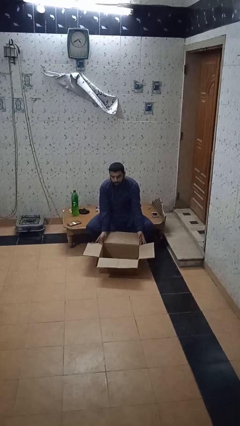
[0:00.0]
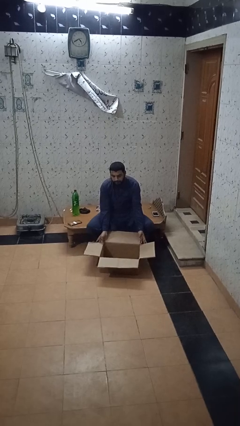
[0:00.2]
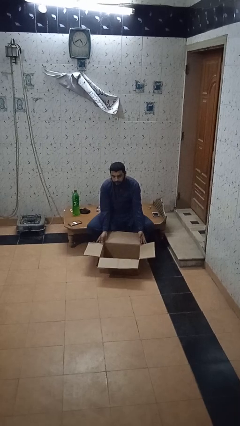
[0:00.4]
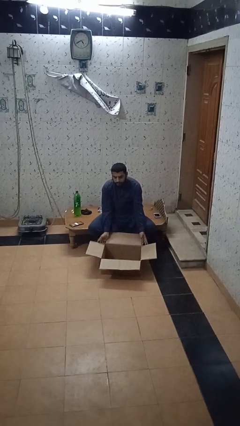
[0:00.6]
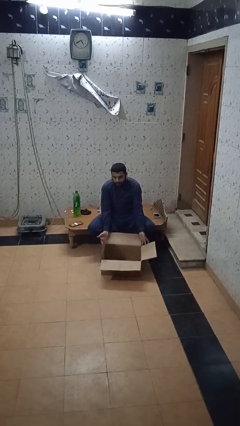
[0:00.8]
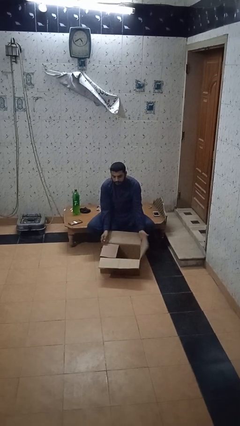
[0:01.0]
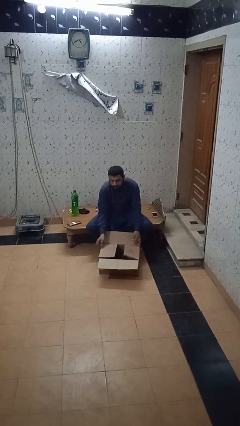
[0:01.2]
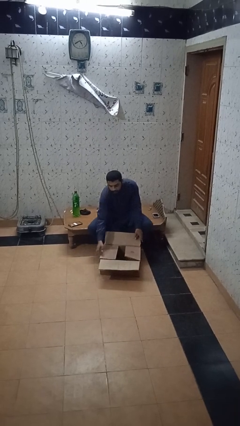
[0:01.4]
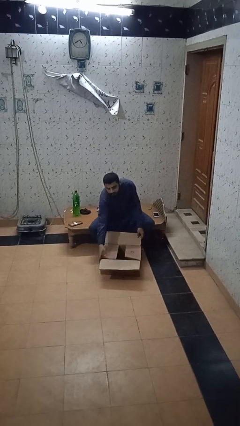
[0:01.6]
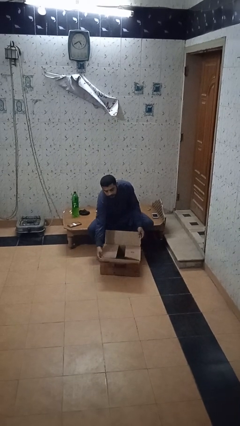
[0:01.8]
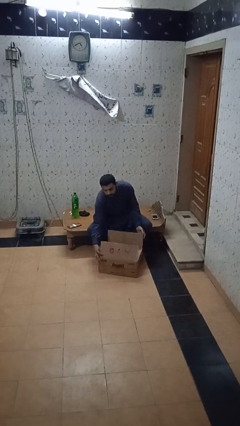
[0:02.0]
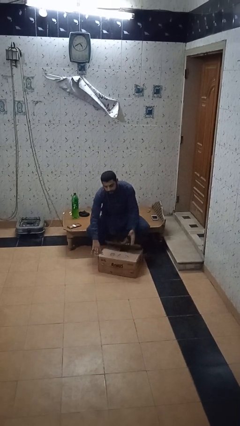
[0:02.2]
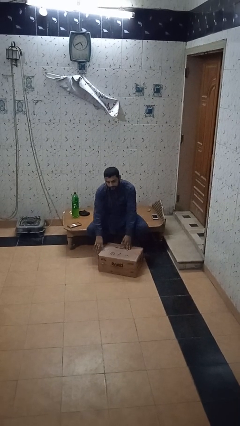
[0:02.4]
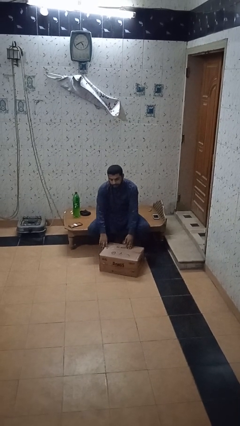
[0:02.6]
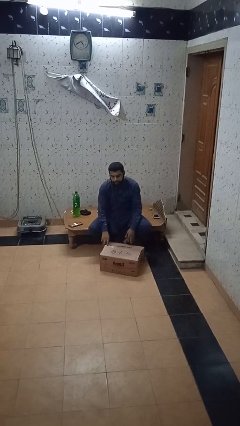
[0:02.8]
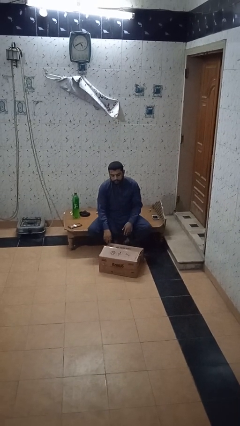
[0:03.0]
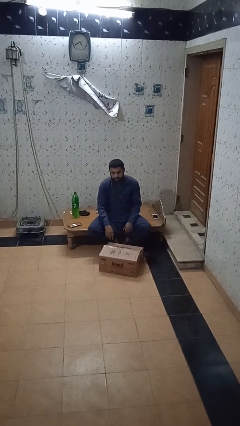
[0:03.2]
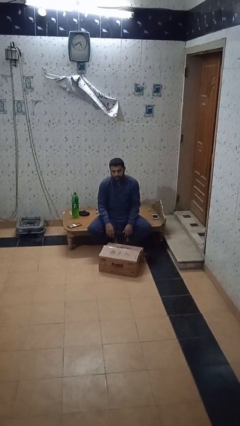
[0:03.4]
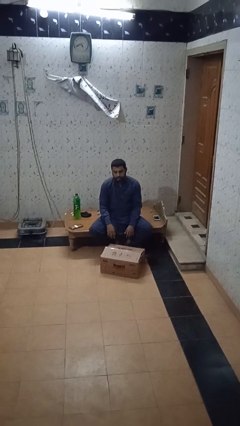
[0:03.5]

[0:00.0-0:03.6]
person closes box

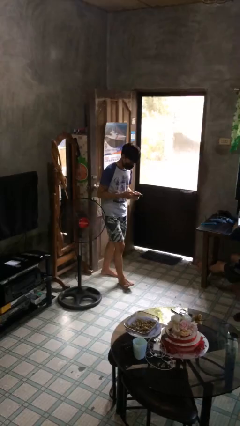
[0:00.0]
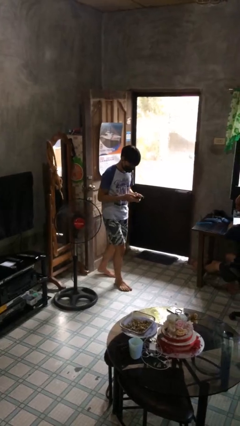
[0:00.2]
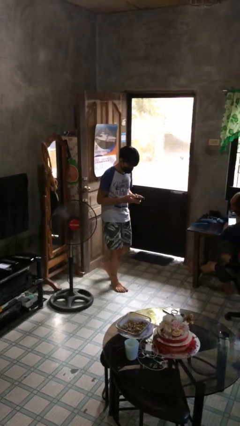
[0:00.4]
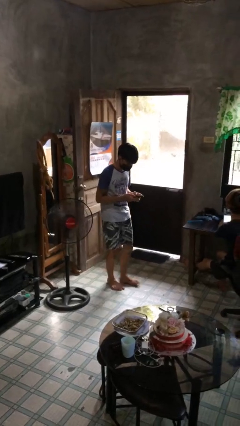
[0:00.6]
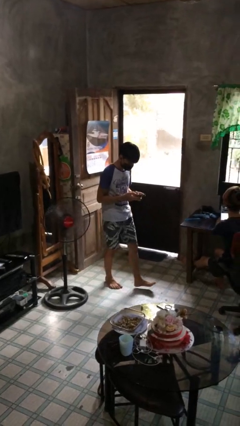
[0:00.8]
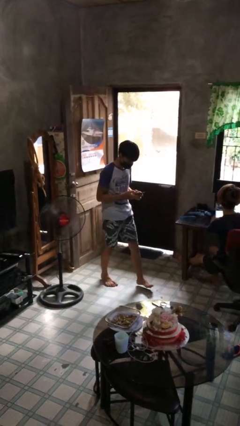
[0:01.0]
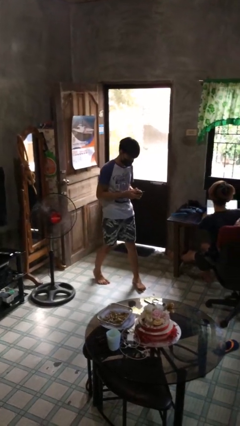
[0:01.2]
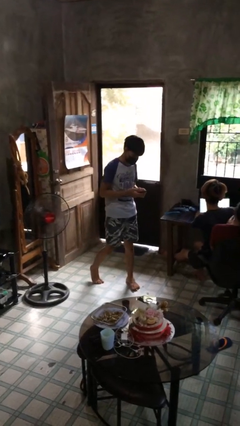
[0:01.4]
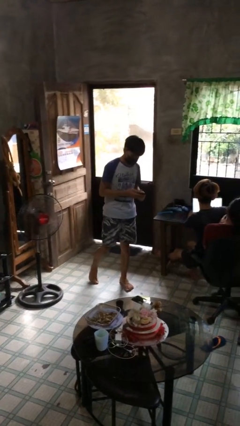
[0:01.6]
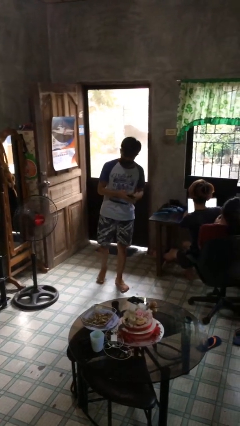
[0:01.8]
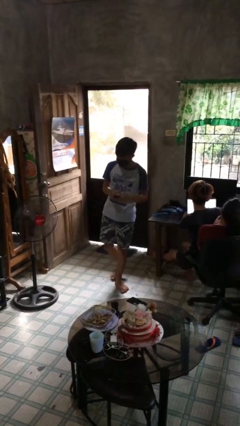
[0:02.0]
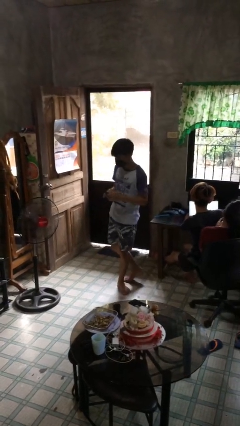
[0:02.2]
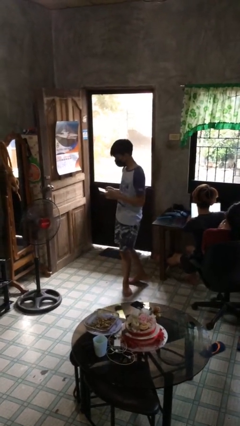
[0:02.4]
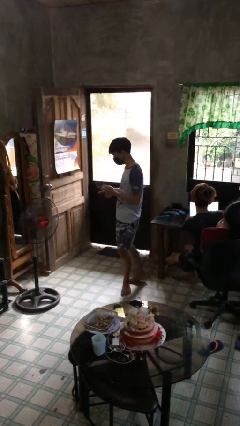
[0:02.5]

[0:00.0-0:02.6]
person texts on phone

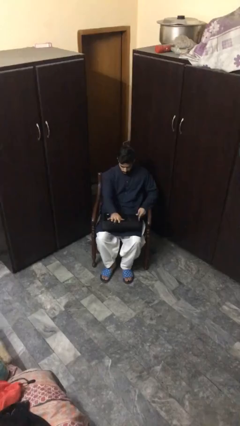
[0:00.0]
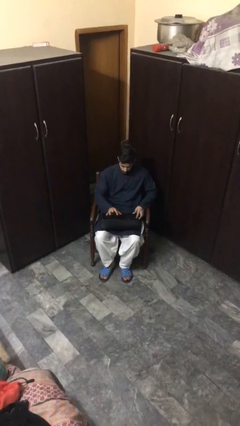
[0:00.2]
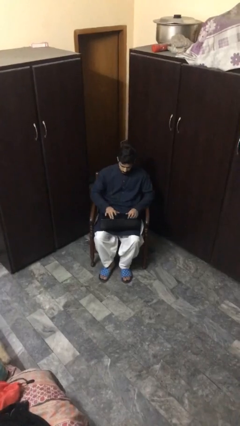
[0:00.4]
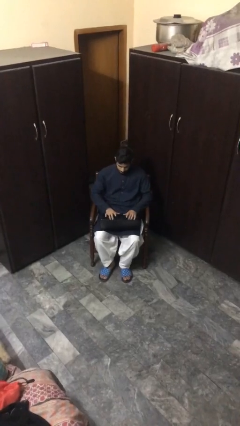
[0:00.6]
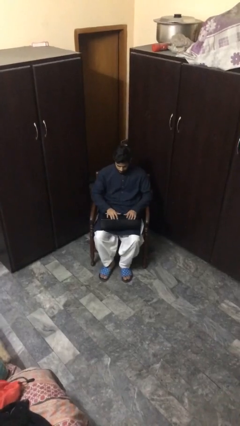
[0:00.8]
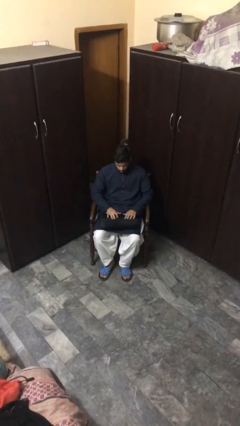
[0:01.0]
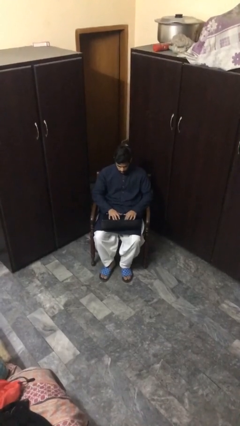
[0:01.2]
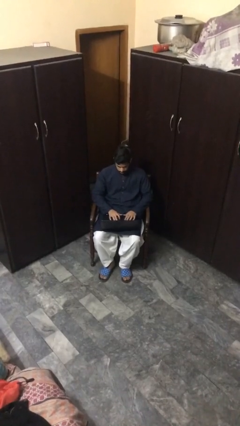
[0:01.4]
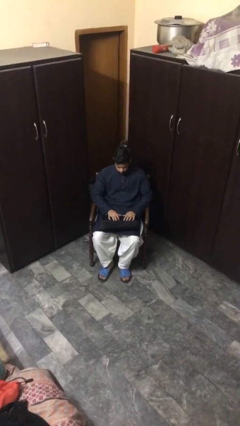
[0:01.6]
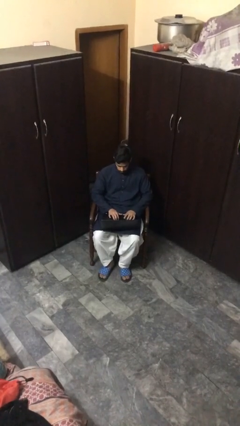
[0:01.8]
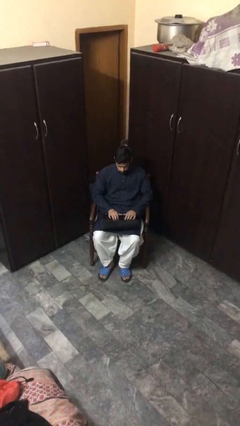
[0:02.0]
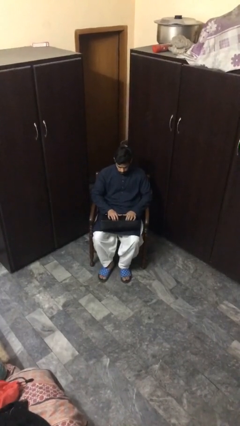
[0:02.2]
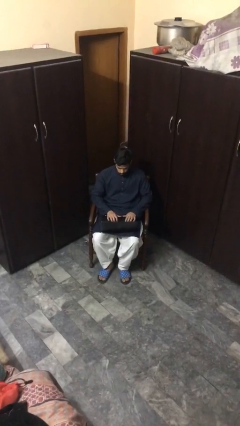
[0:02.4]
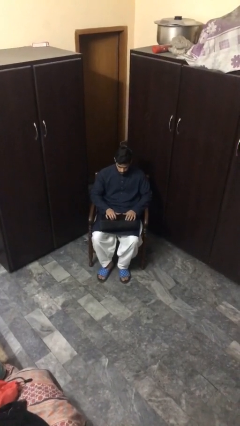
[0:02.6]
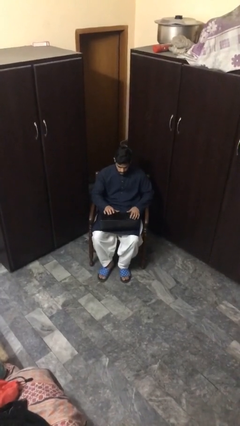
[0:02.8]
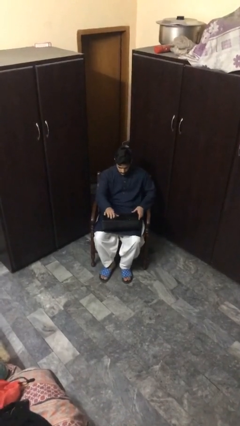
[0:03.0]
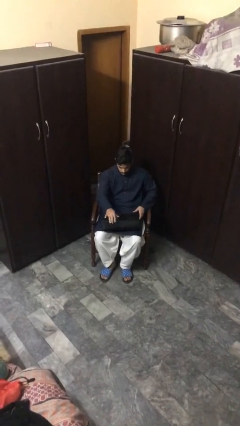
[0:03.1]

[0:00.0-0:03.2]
person interacts with laptop

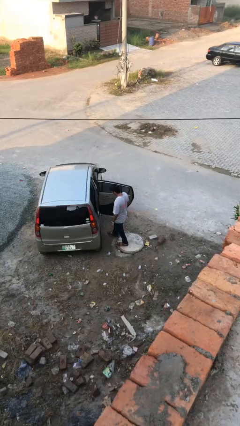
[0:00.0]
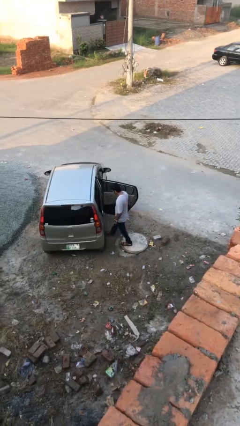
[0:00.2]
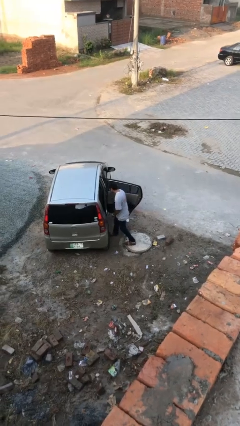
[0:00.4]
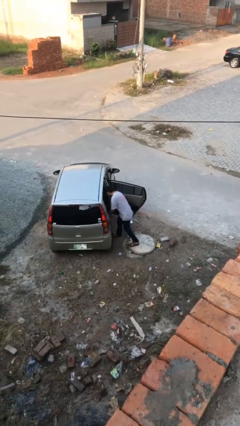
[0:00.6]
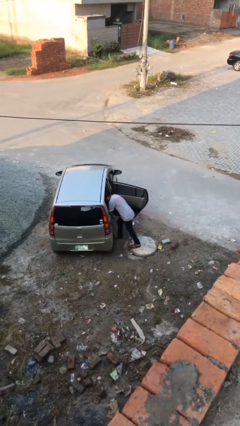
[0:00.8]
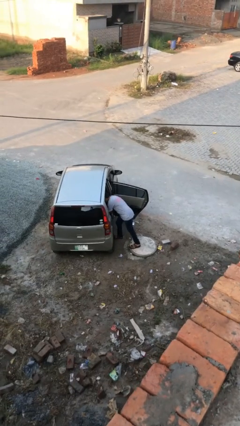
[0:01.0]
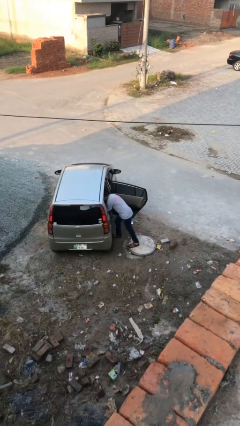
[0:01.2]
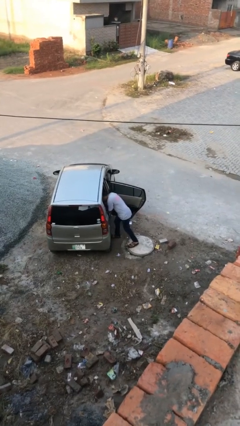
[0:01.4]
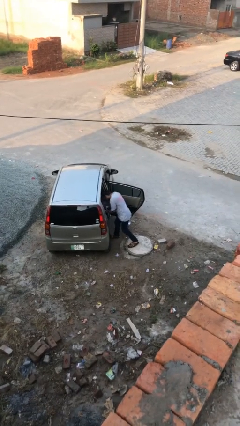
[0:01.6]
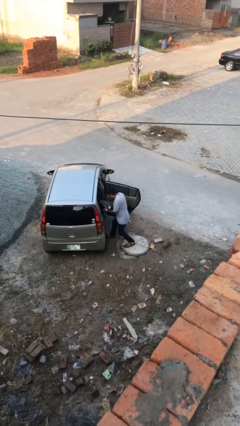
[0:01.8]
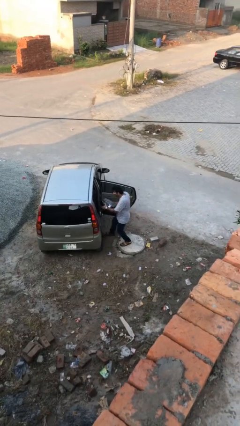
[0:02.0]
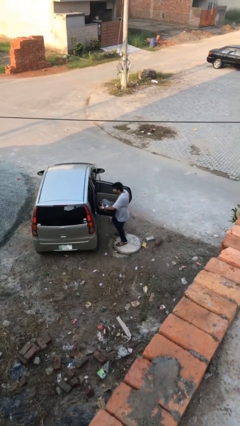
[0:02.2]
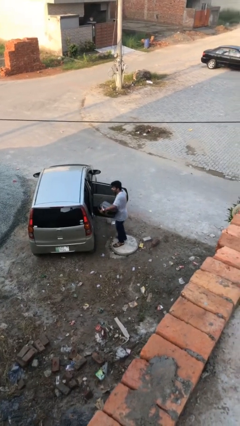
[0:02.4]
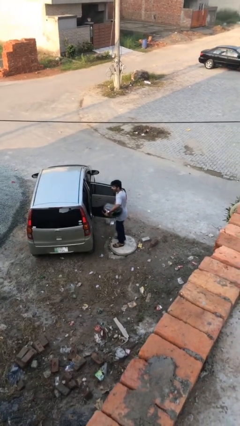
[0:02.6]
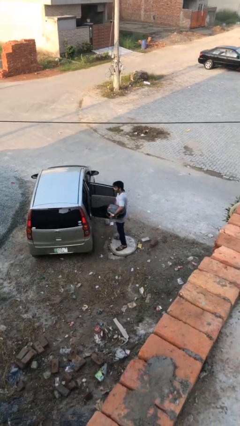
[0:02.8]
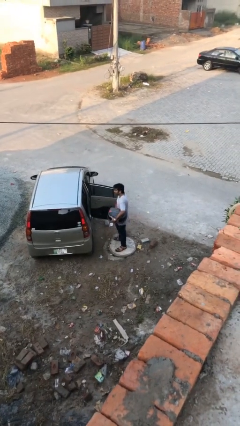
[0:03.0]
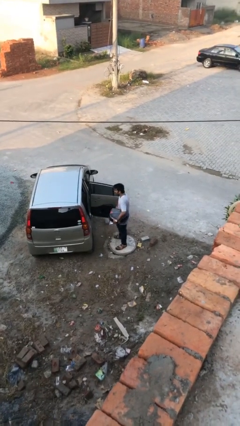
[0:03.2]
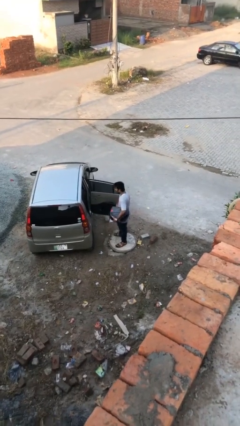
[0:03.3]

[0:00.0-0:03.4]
person unloads car

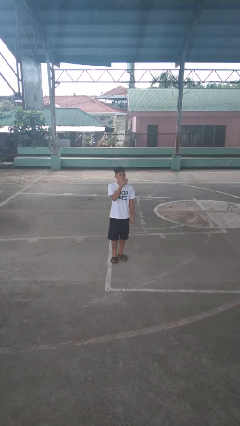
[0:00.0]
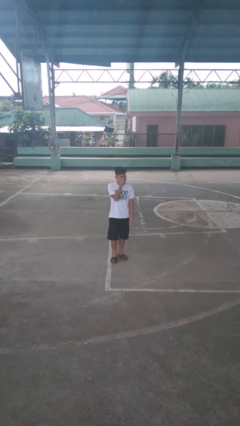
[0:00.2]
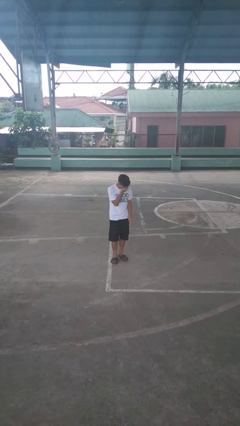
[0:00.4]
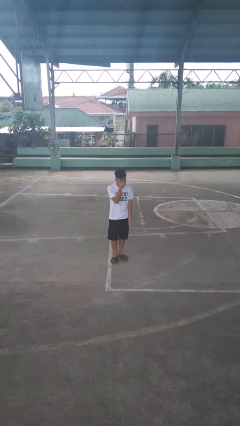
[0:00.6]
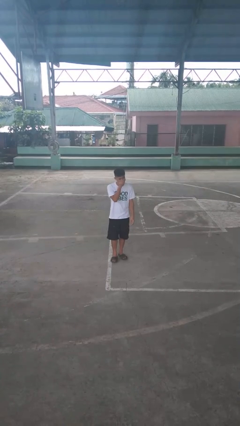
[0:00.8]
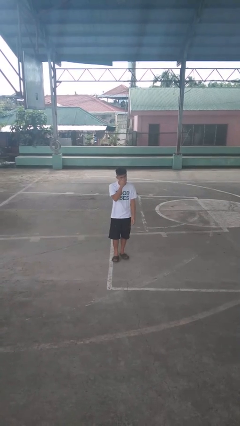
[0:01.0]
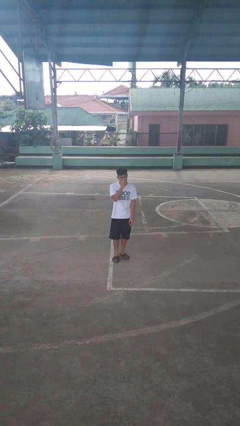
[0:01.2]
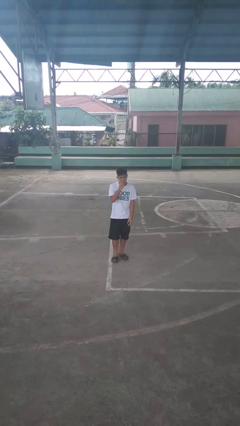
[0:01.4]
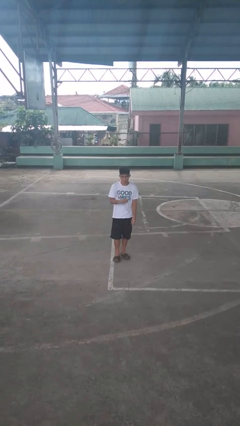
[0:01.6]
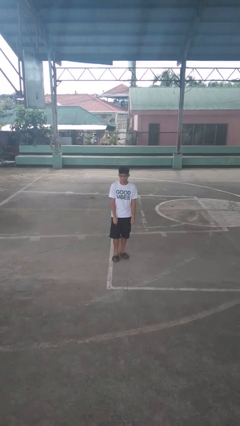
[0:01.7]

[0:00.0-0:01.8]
person sneezes into hand

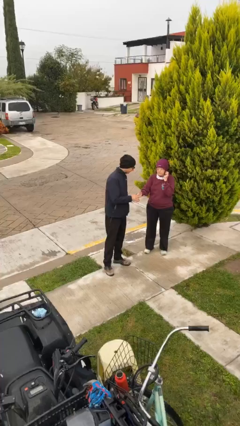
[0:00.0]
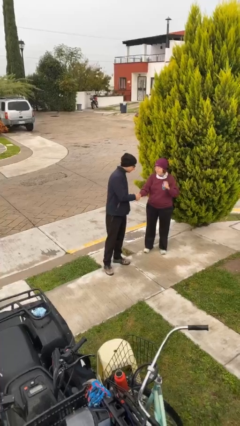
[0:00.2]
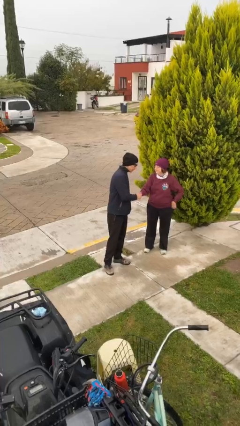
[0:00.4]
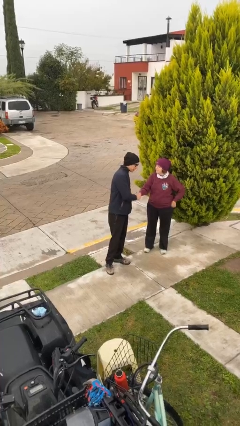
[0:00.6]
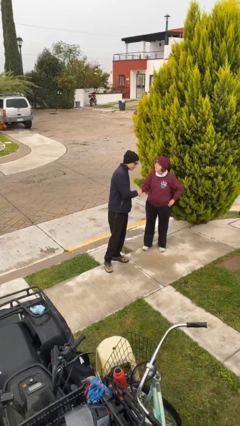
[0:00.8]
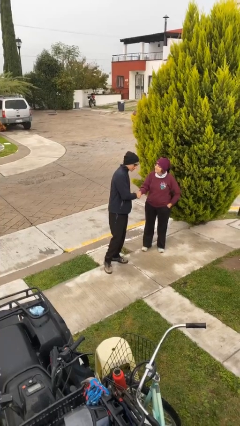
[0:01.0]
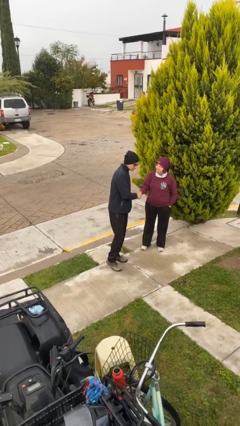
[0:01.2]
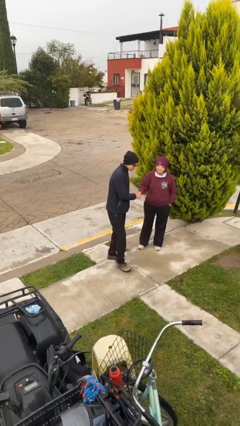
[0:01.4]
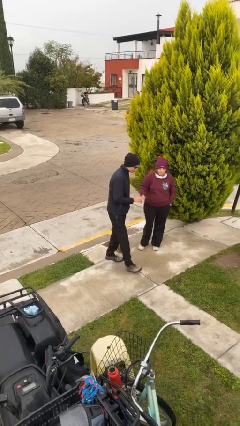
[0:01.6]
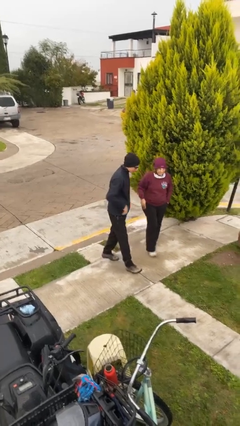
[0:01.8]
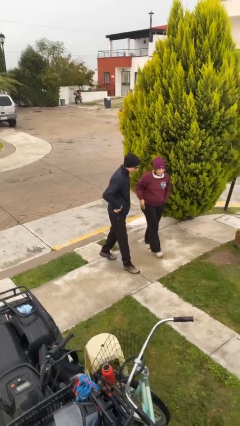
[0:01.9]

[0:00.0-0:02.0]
person shakes hand

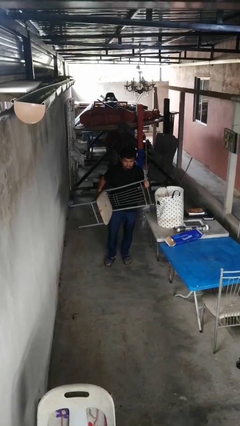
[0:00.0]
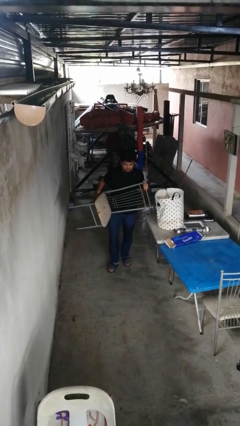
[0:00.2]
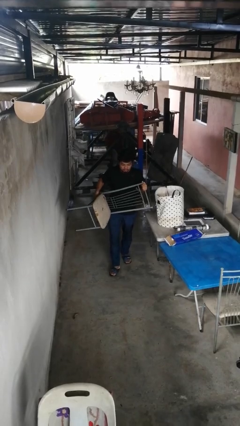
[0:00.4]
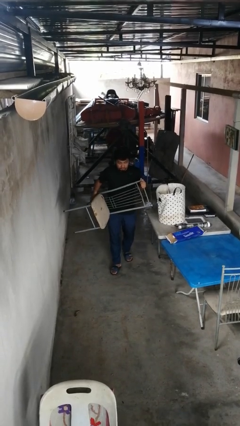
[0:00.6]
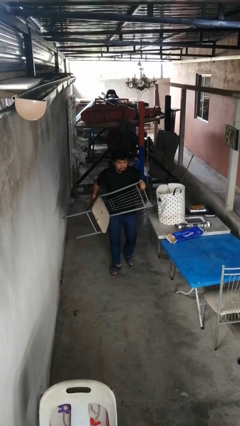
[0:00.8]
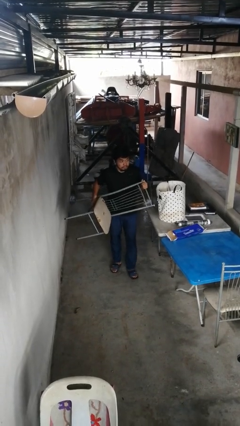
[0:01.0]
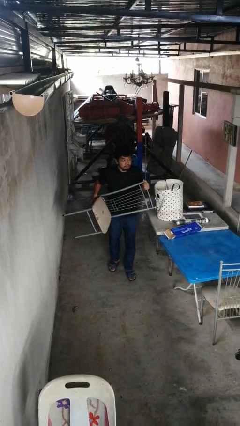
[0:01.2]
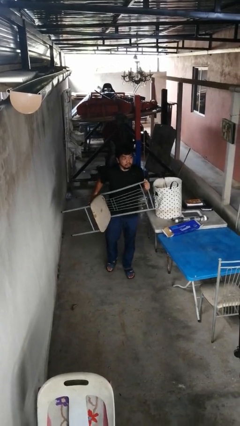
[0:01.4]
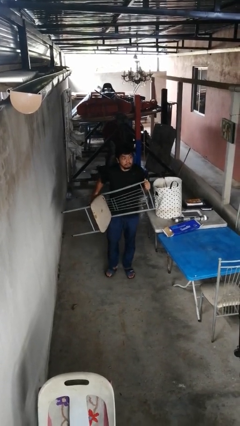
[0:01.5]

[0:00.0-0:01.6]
person carries furniture
